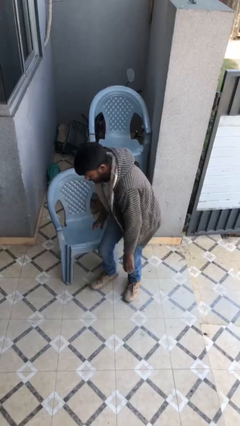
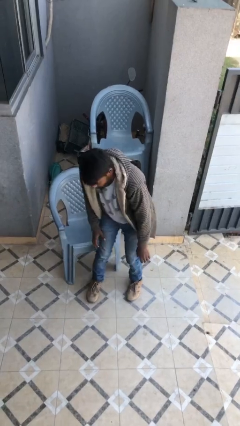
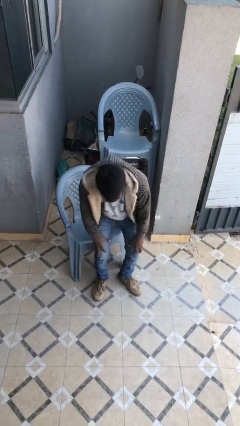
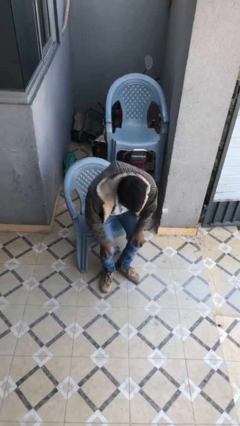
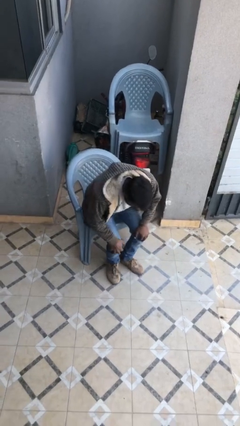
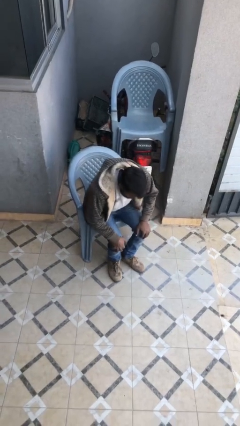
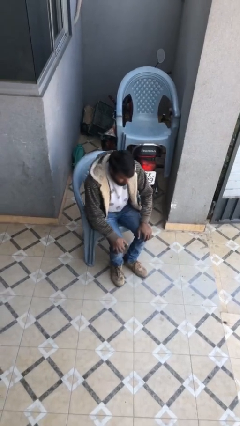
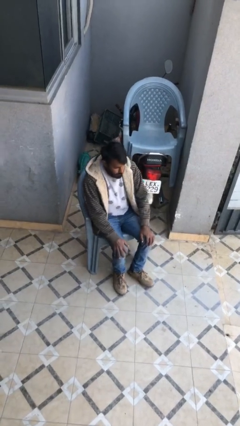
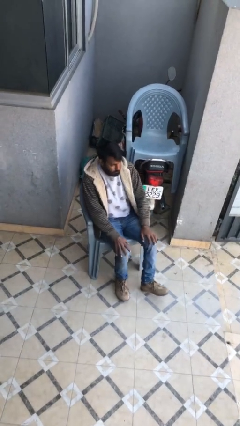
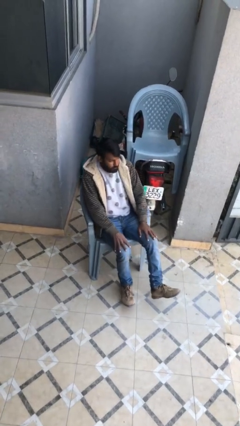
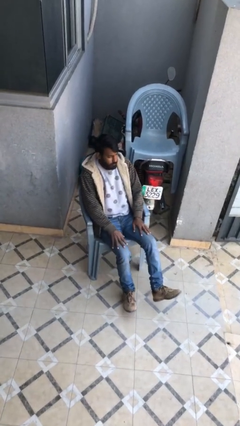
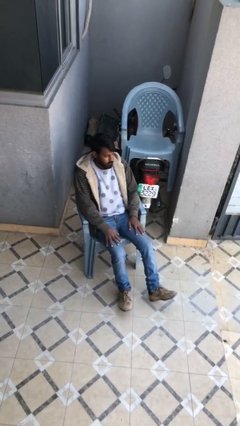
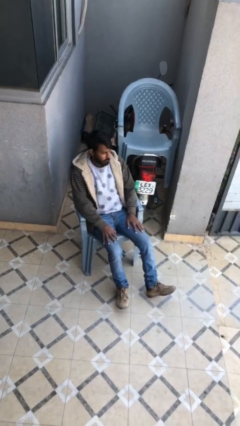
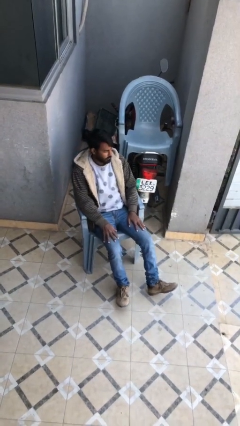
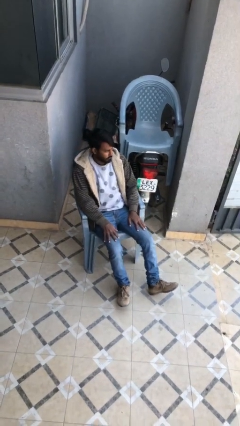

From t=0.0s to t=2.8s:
person sits down

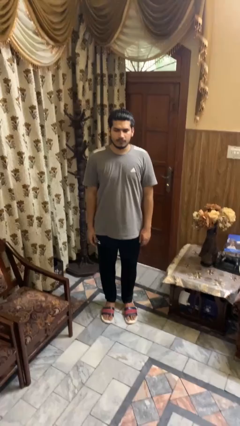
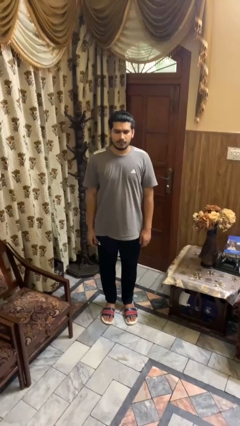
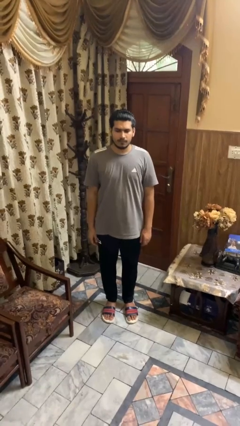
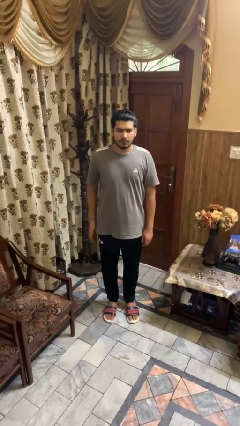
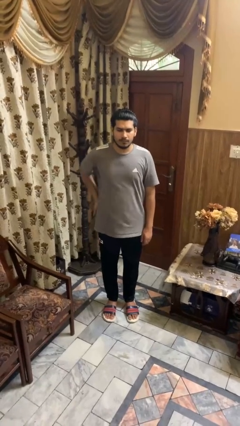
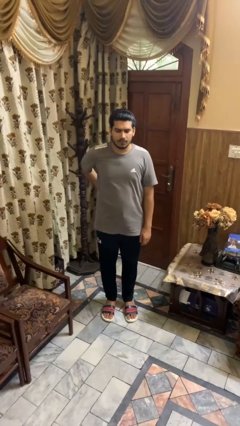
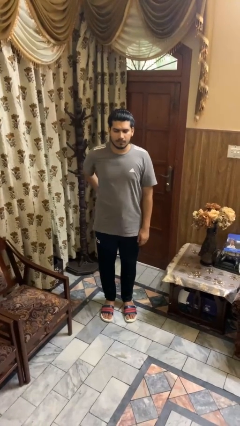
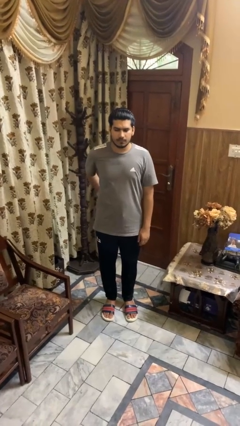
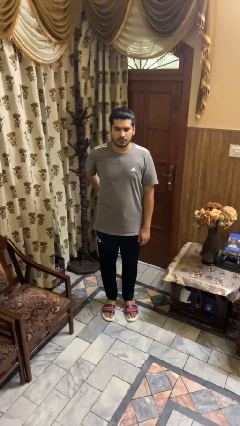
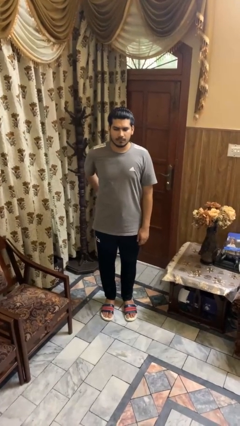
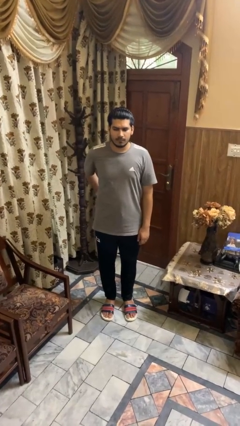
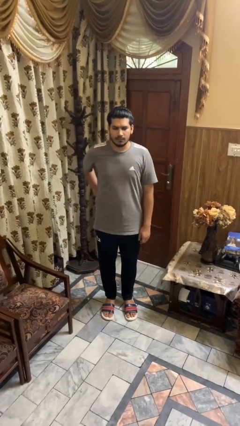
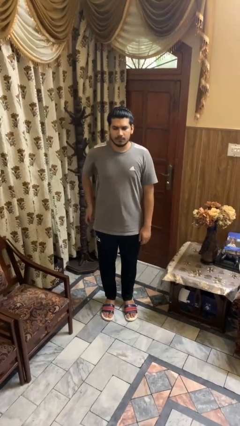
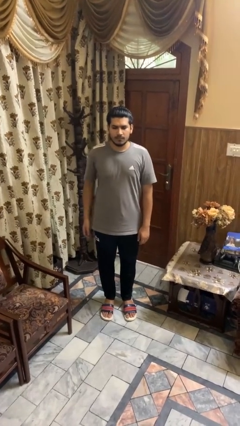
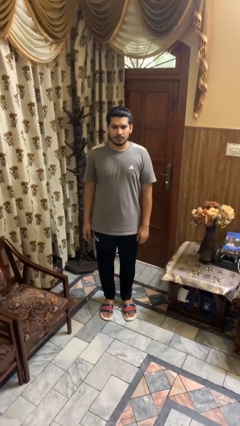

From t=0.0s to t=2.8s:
person puts hands in back pockets

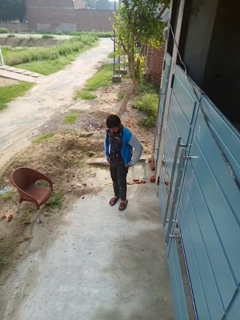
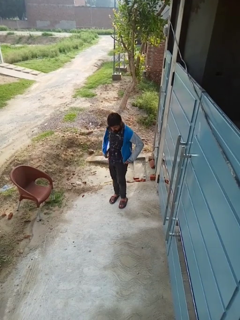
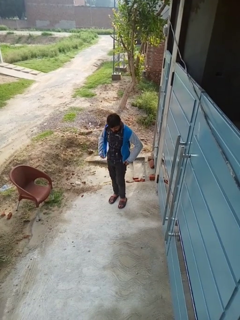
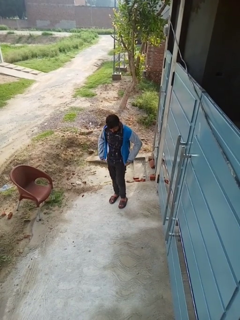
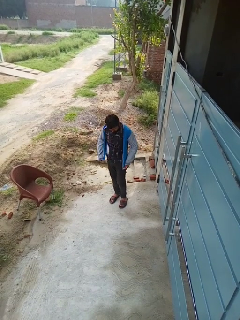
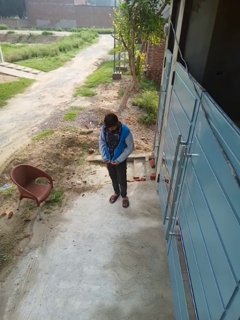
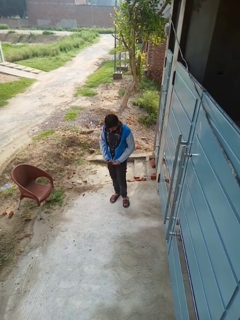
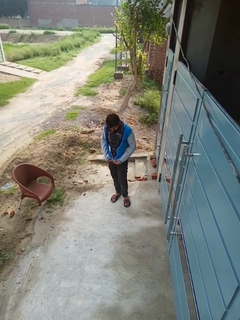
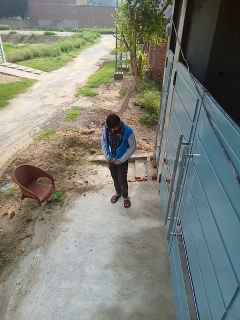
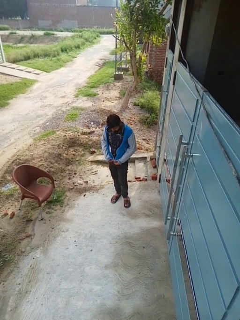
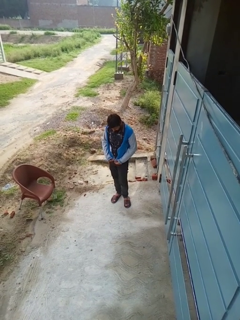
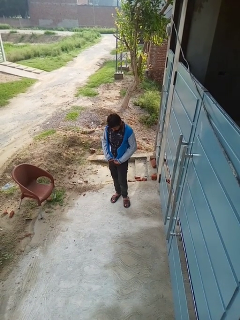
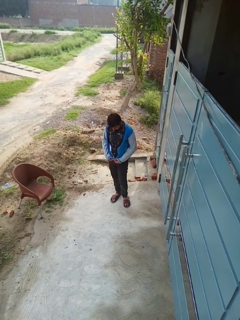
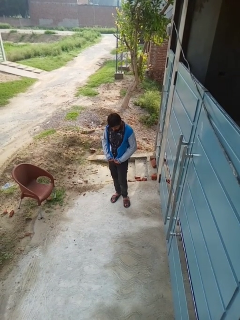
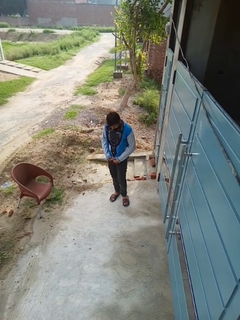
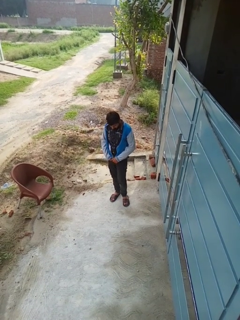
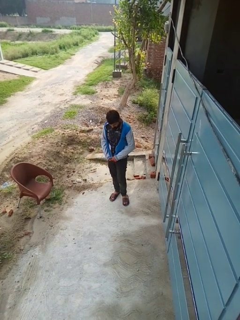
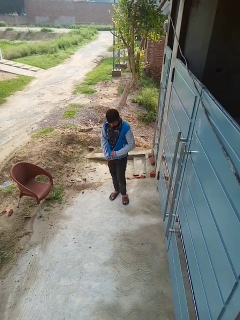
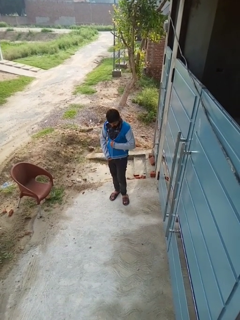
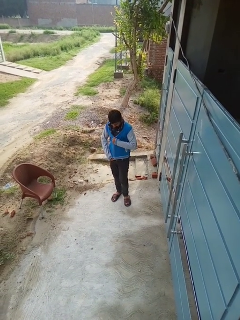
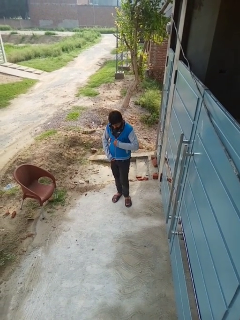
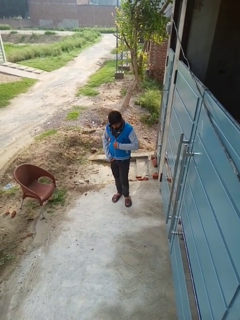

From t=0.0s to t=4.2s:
person zips up jacket

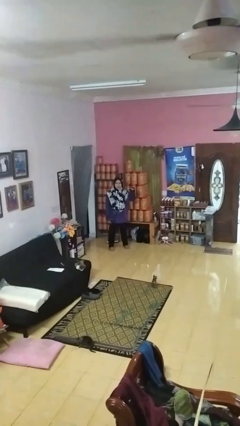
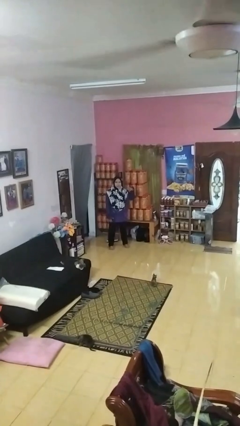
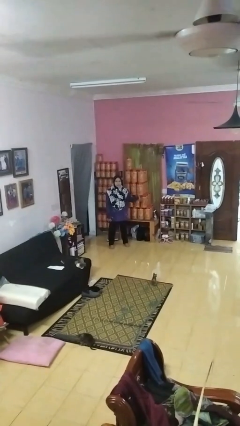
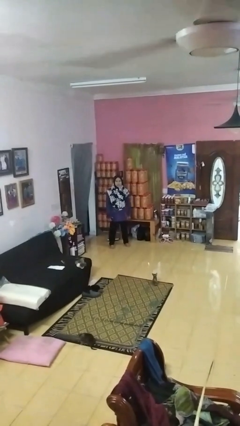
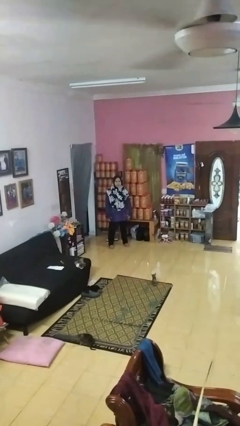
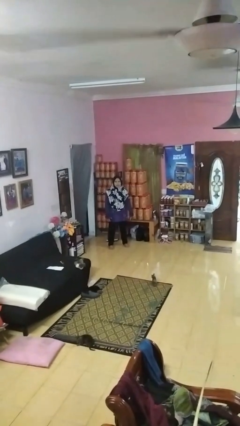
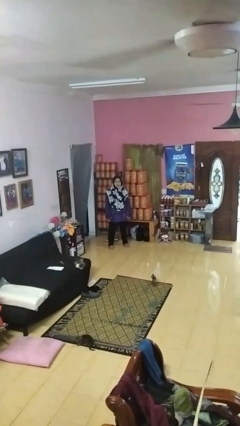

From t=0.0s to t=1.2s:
person gestures cut

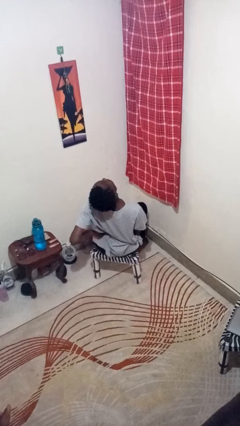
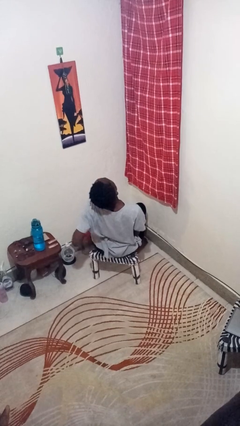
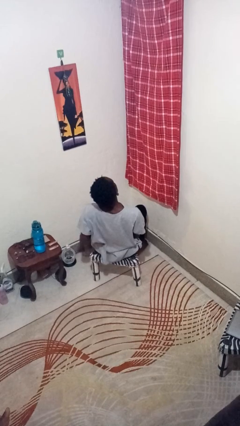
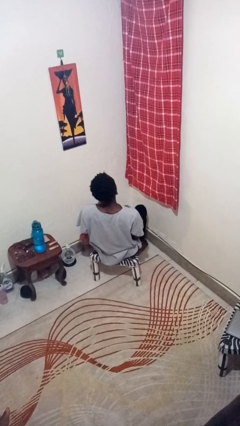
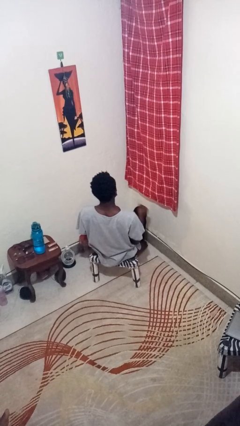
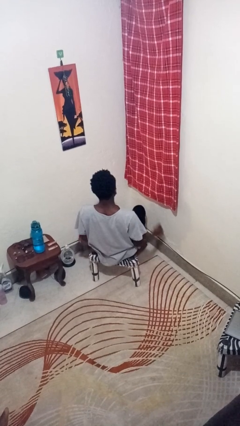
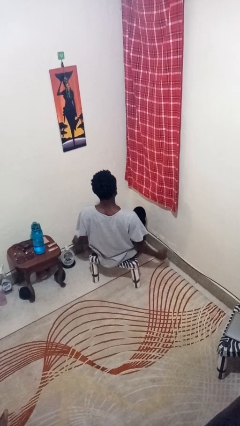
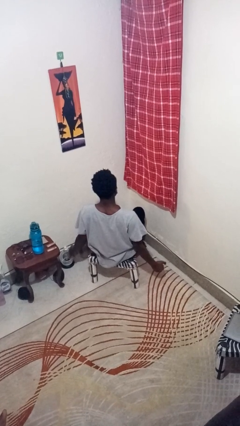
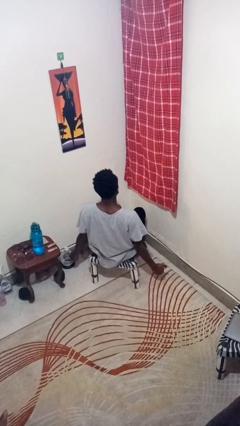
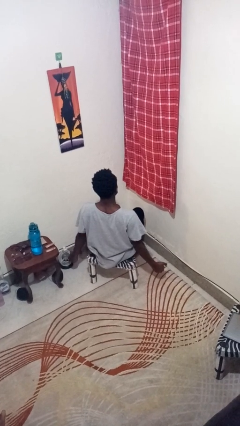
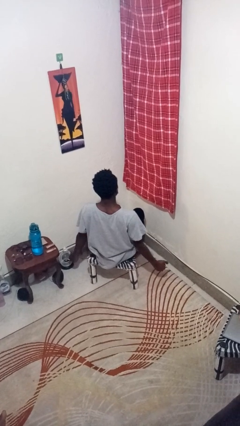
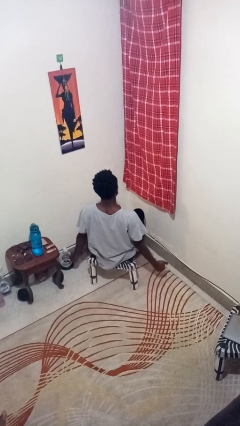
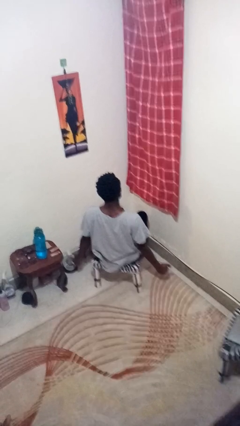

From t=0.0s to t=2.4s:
person stretches arms to side

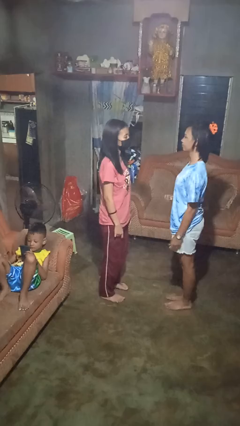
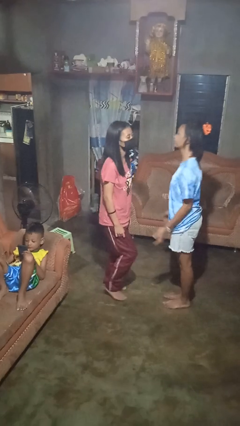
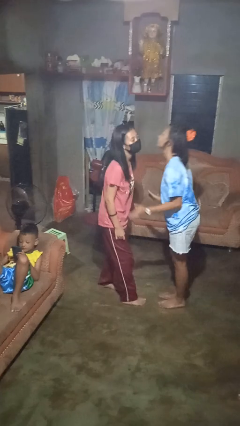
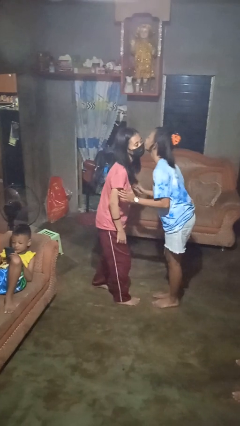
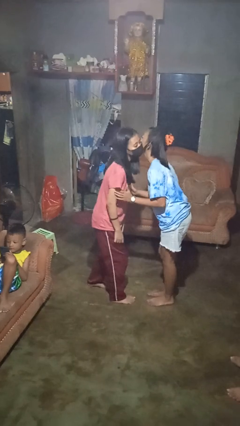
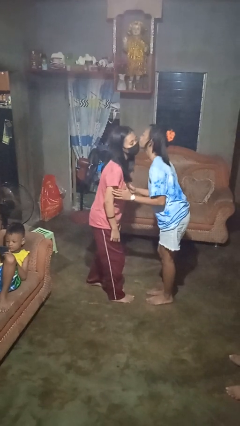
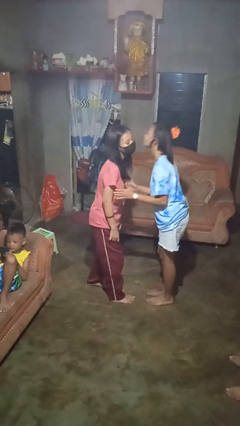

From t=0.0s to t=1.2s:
person kisses cheek of person

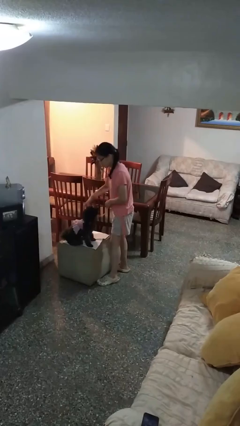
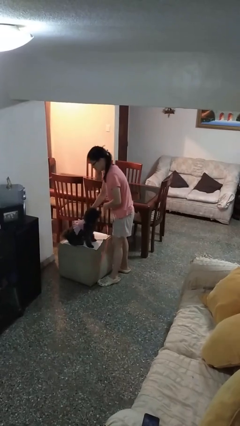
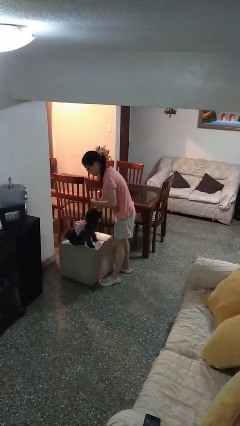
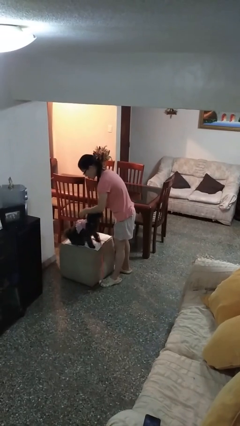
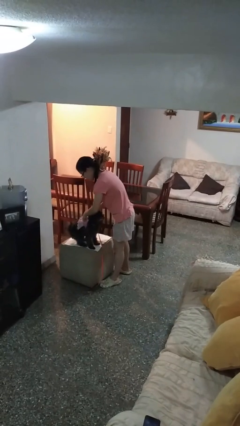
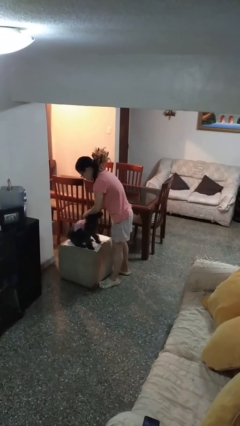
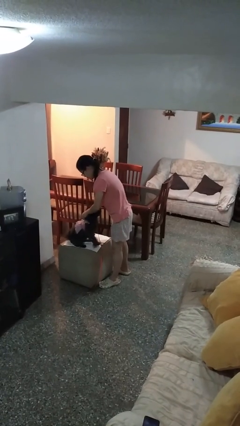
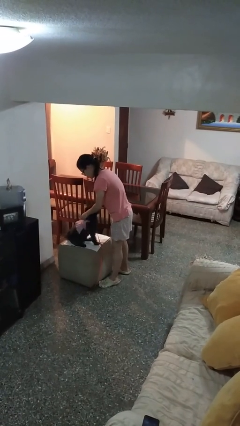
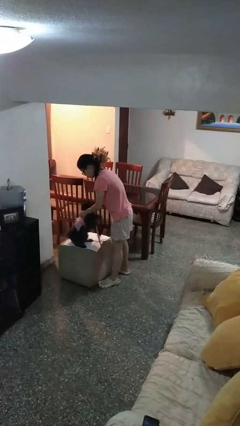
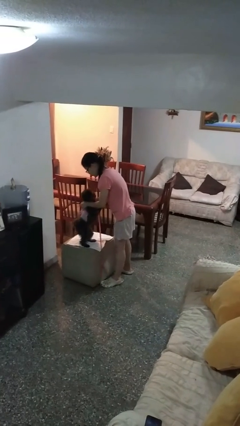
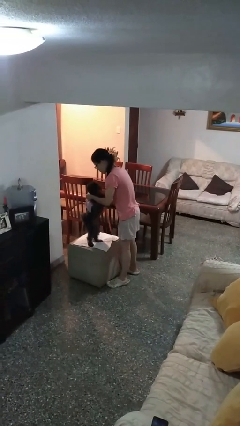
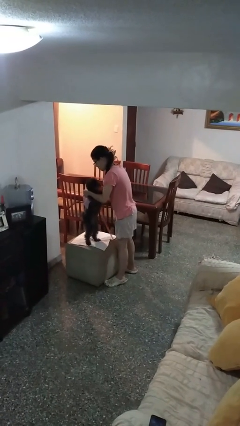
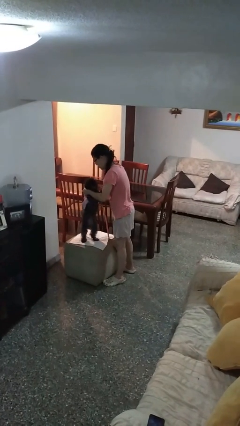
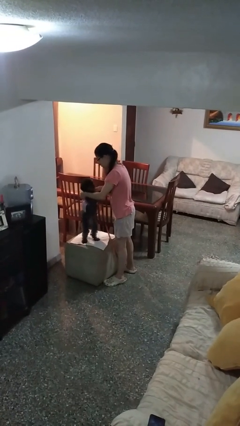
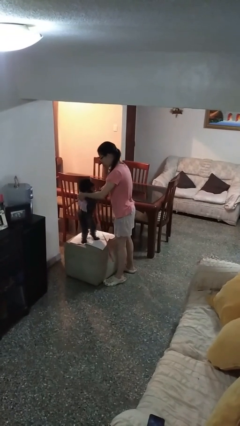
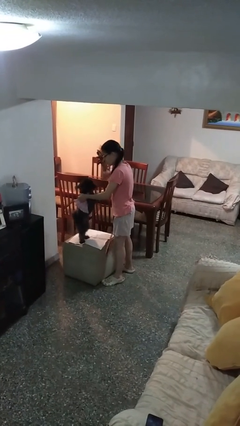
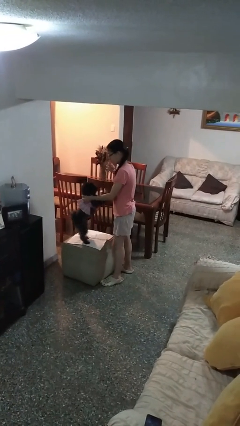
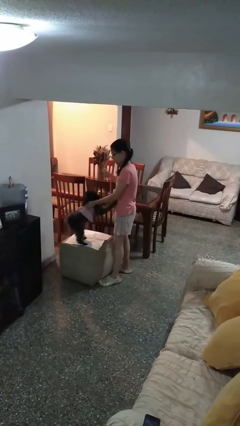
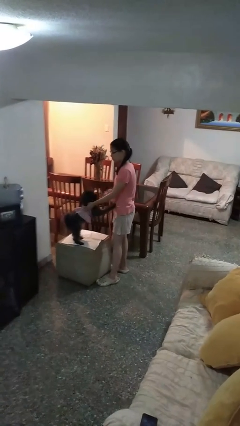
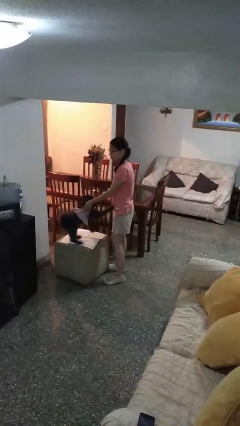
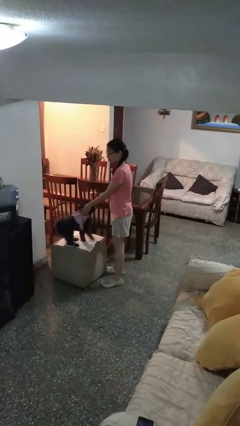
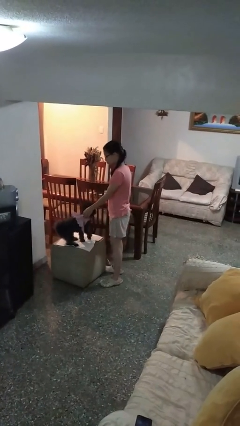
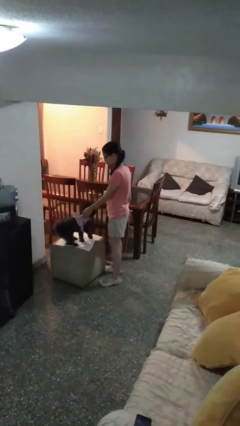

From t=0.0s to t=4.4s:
person unattaches leash from dog
